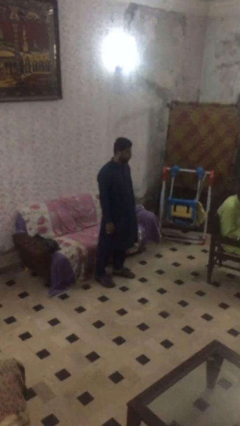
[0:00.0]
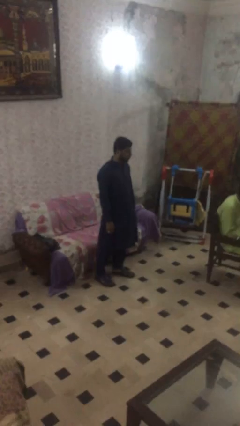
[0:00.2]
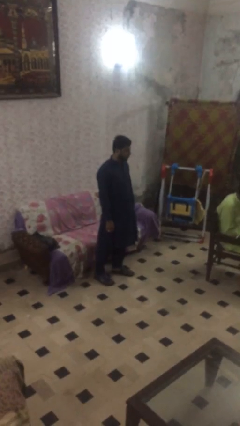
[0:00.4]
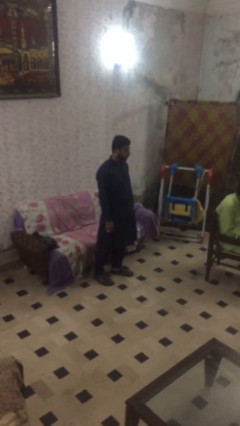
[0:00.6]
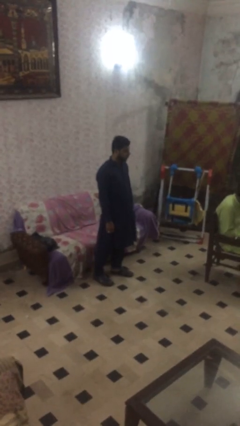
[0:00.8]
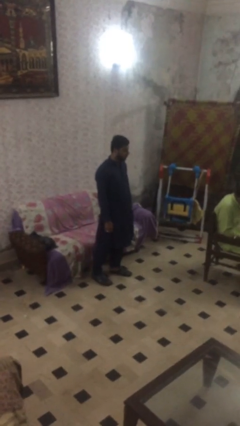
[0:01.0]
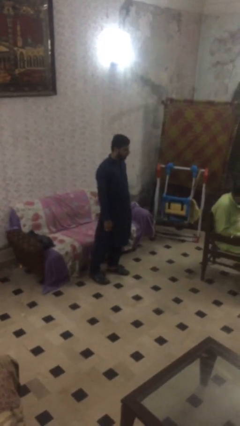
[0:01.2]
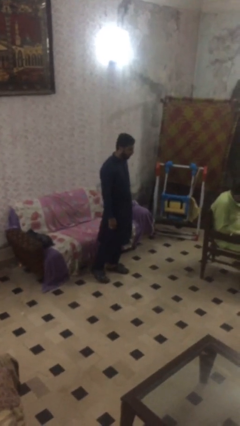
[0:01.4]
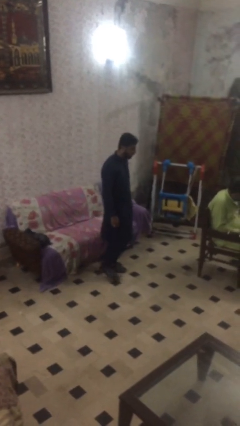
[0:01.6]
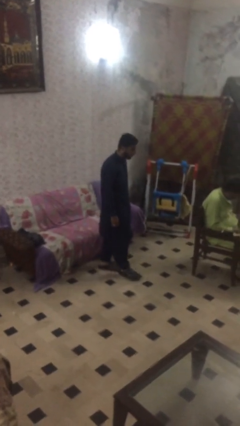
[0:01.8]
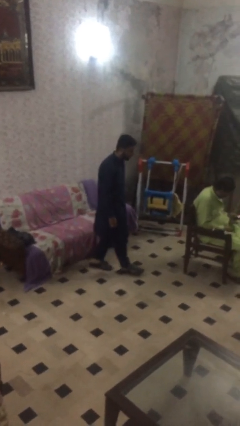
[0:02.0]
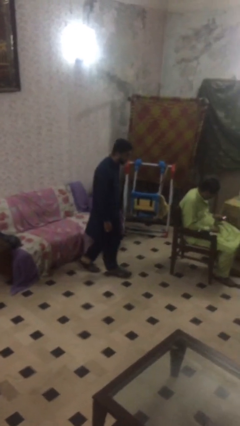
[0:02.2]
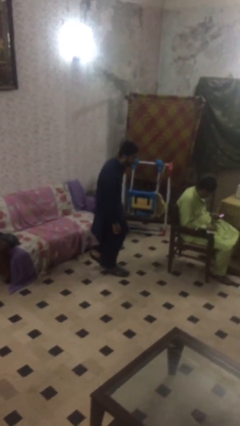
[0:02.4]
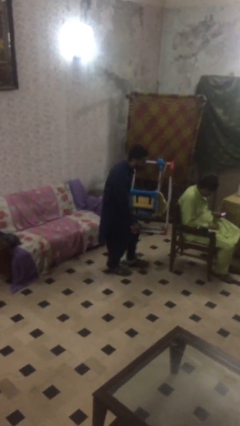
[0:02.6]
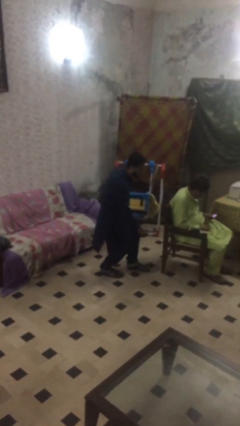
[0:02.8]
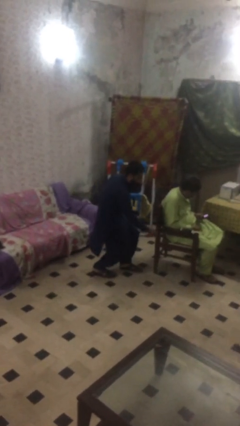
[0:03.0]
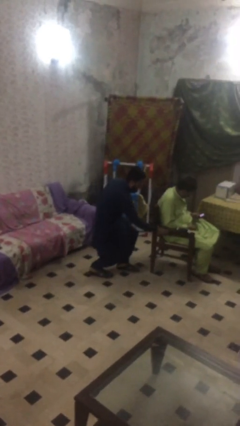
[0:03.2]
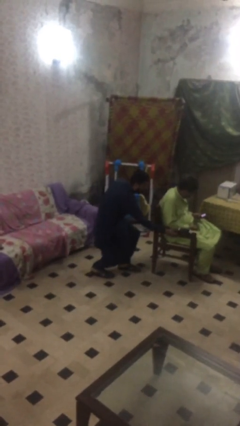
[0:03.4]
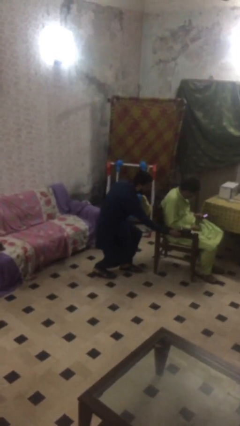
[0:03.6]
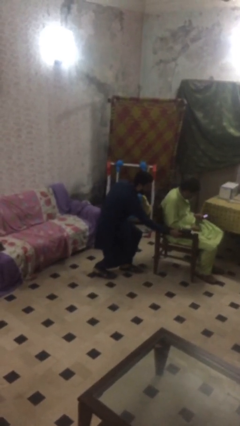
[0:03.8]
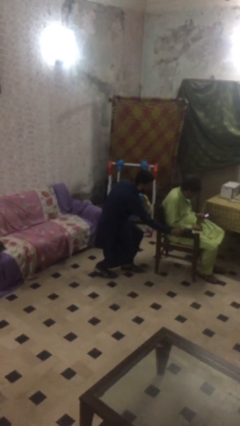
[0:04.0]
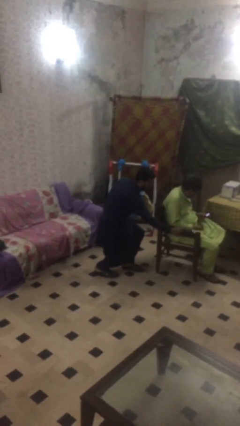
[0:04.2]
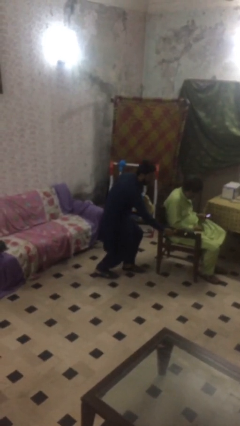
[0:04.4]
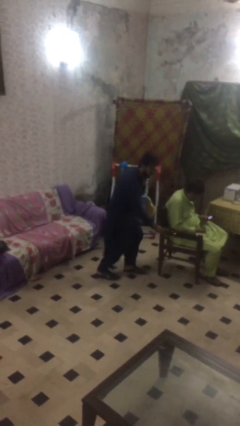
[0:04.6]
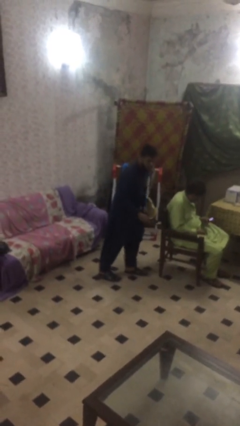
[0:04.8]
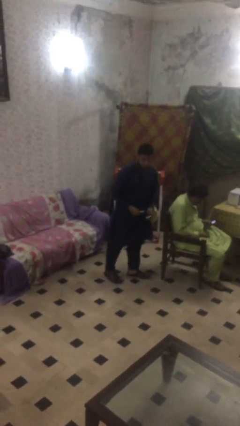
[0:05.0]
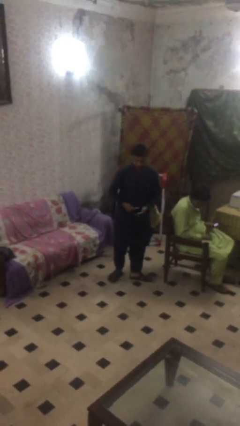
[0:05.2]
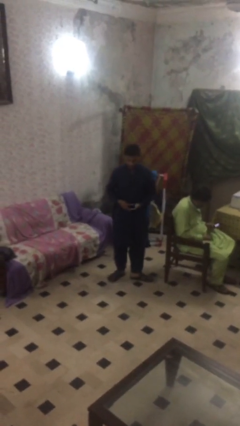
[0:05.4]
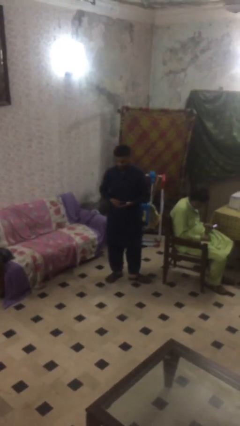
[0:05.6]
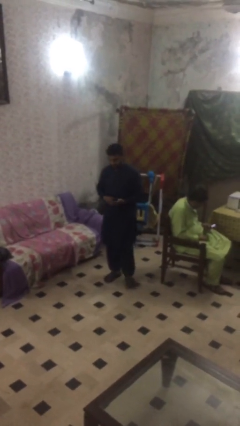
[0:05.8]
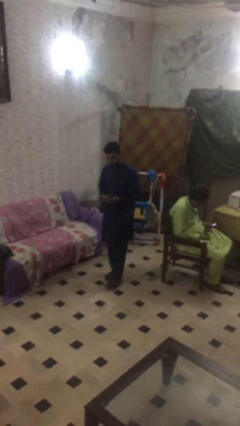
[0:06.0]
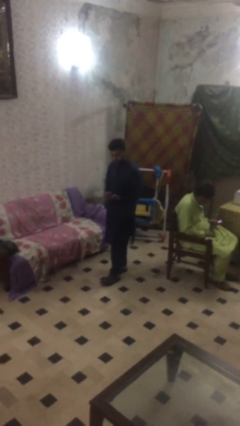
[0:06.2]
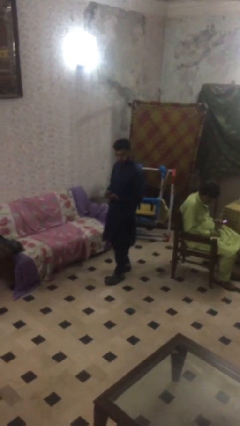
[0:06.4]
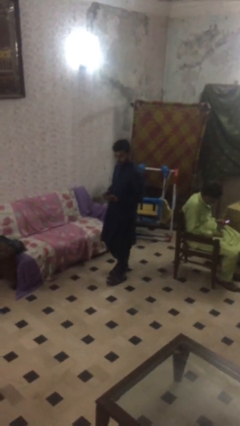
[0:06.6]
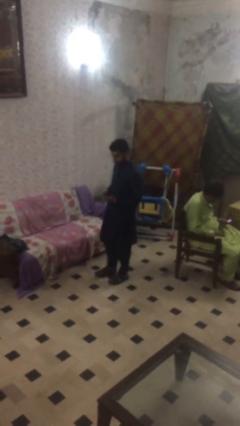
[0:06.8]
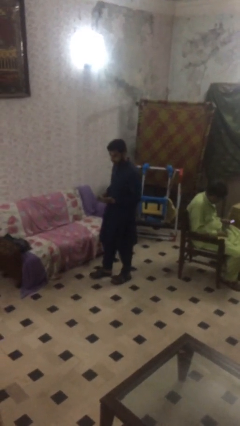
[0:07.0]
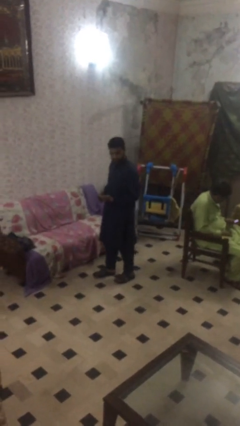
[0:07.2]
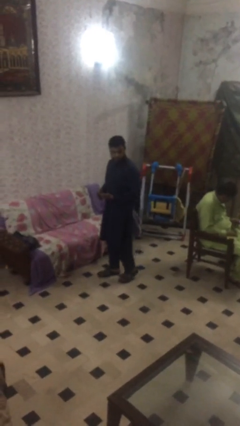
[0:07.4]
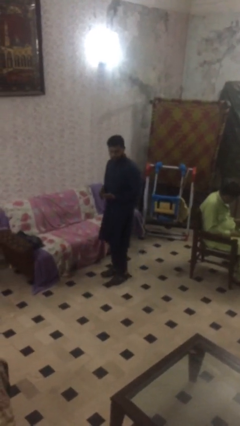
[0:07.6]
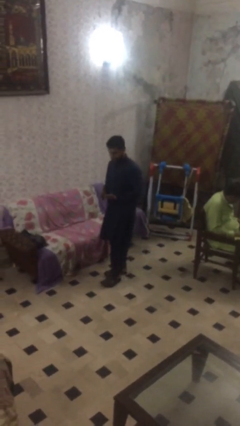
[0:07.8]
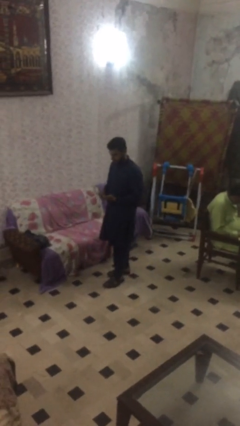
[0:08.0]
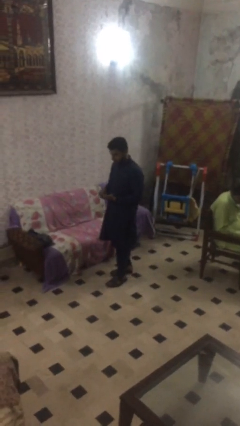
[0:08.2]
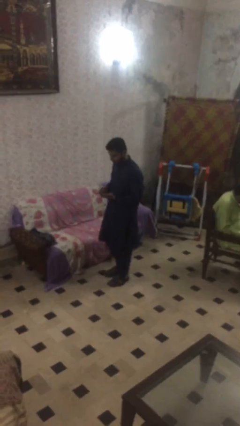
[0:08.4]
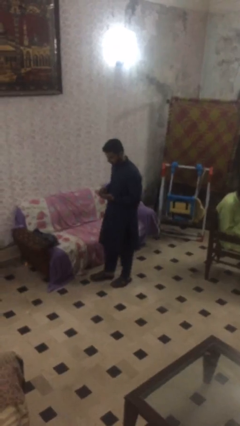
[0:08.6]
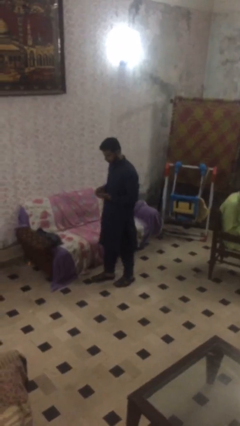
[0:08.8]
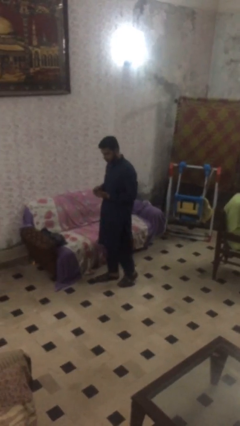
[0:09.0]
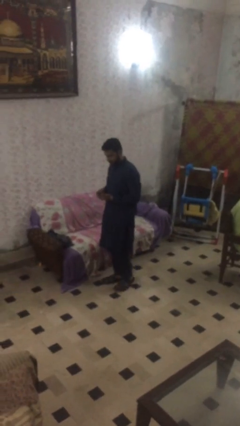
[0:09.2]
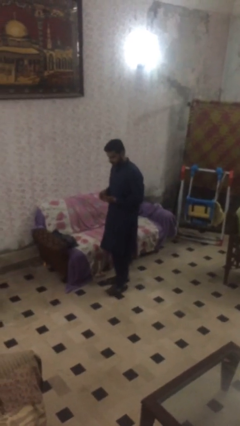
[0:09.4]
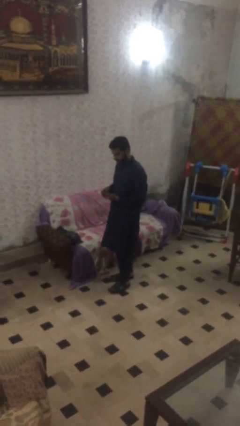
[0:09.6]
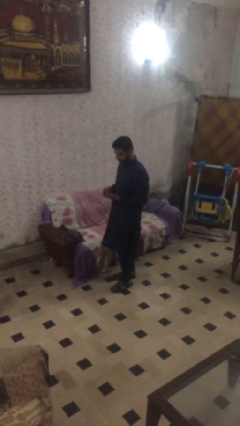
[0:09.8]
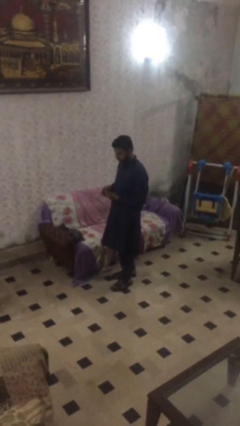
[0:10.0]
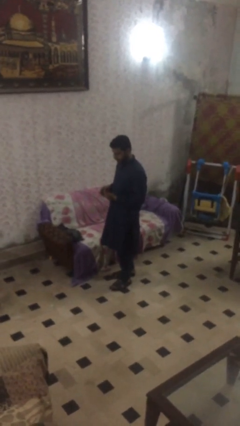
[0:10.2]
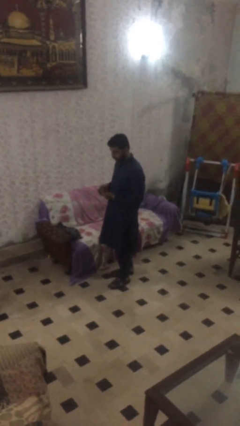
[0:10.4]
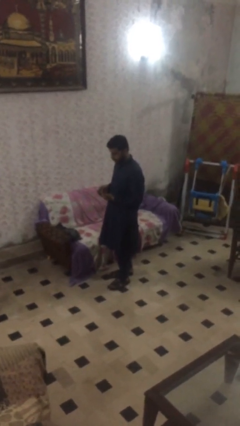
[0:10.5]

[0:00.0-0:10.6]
person steals object from person

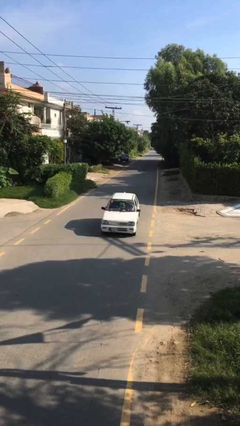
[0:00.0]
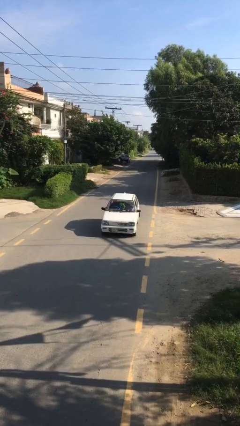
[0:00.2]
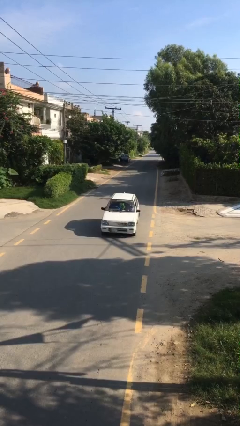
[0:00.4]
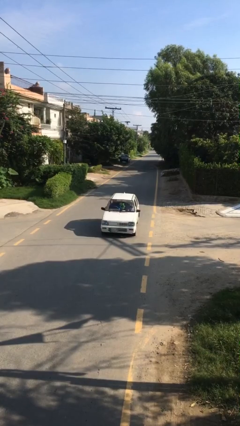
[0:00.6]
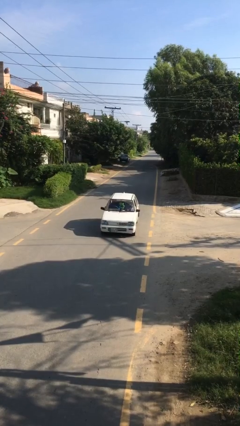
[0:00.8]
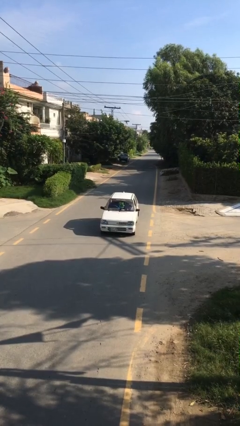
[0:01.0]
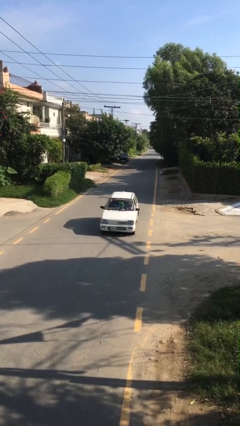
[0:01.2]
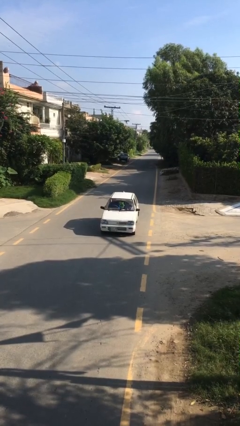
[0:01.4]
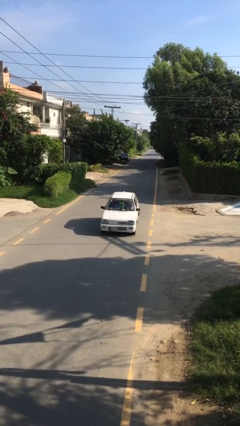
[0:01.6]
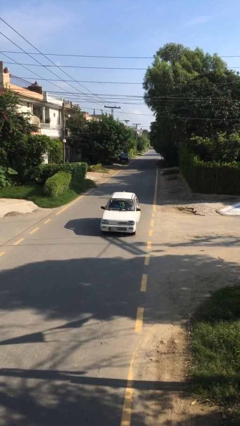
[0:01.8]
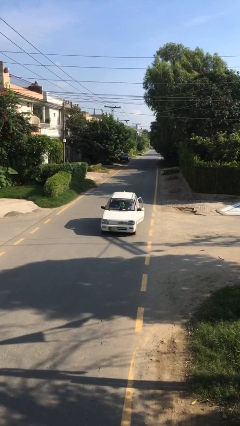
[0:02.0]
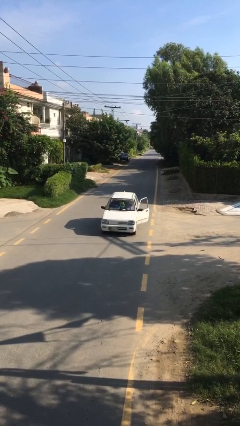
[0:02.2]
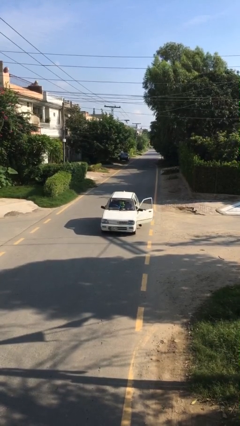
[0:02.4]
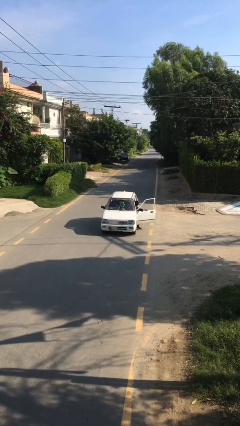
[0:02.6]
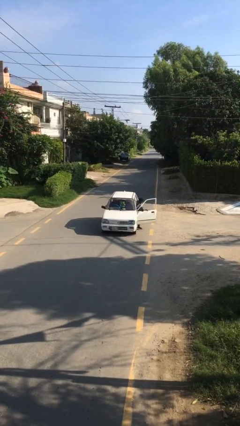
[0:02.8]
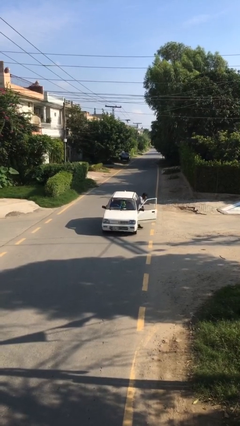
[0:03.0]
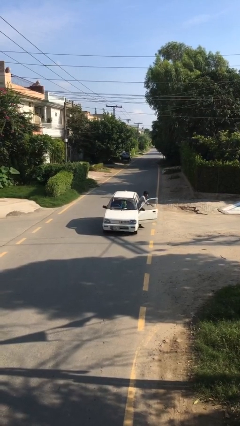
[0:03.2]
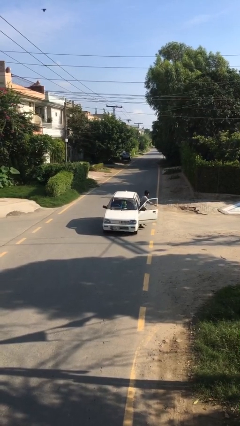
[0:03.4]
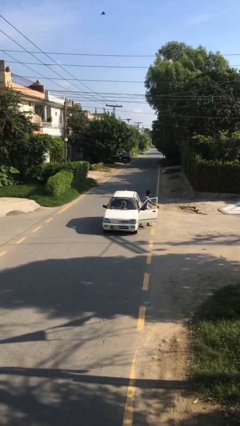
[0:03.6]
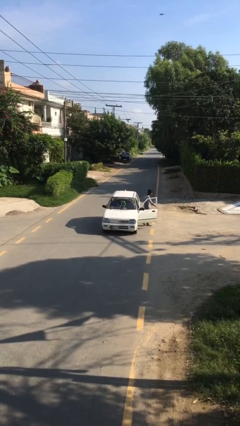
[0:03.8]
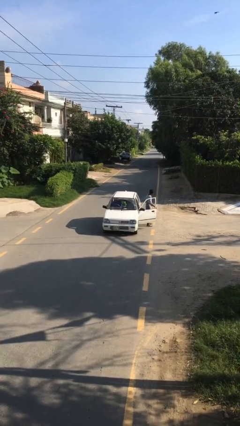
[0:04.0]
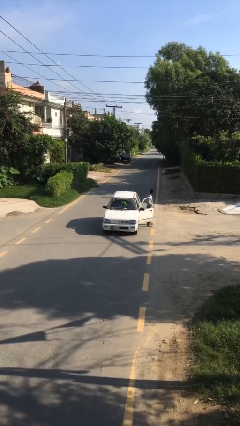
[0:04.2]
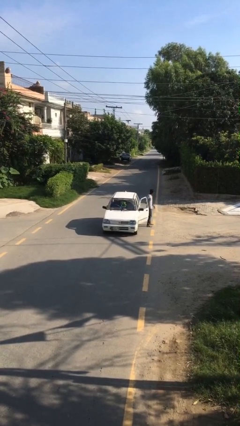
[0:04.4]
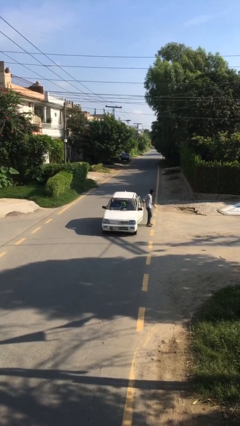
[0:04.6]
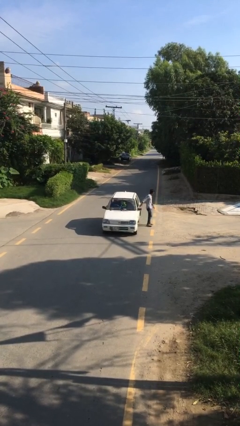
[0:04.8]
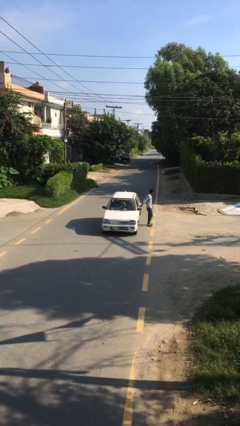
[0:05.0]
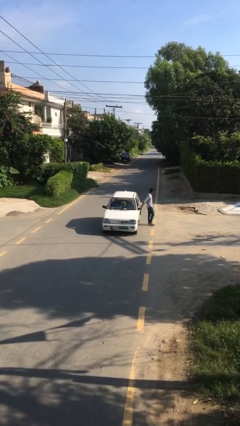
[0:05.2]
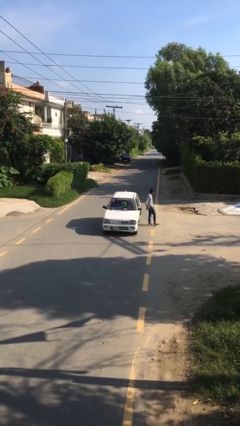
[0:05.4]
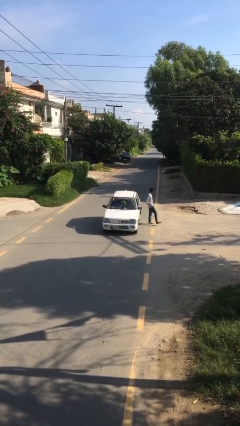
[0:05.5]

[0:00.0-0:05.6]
car drops off person

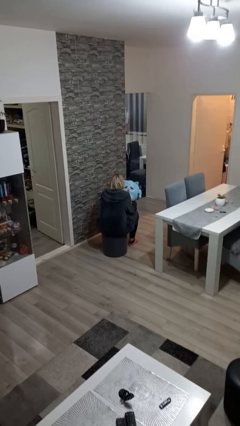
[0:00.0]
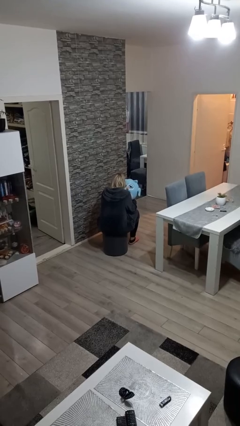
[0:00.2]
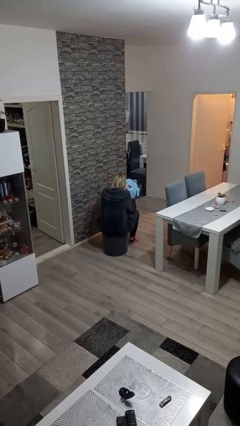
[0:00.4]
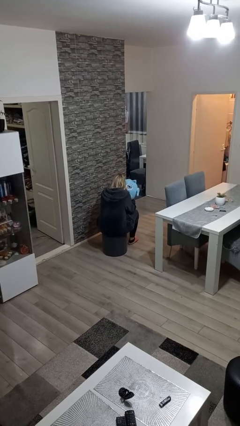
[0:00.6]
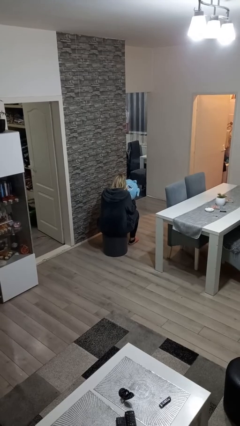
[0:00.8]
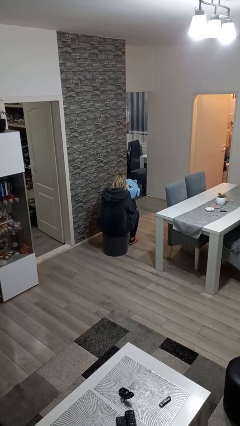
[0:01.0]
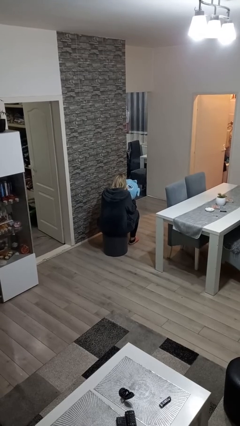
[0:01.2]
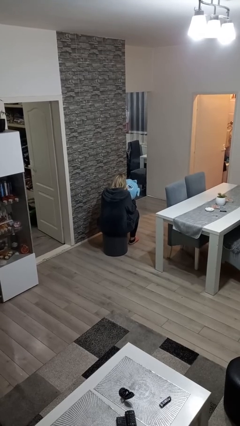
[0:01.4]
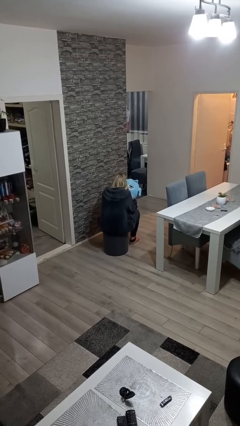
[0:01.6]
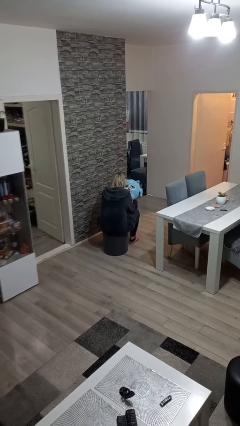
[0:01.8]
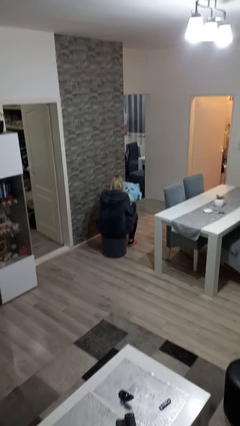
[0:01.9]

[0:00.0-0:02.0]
person hugs stuffed animal

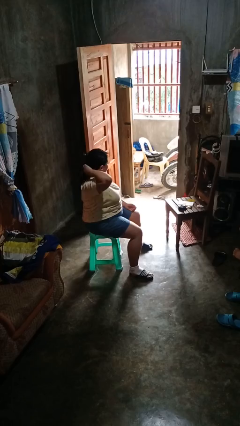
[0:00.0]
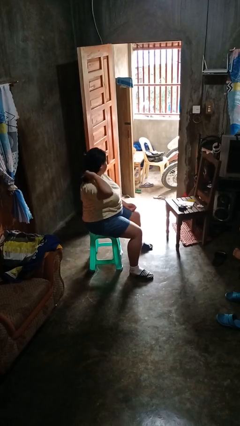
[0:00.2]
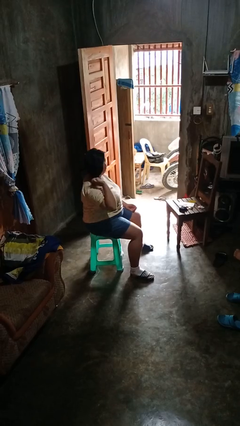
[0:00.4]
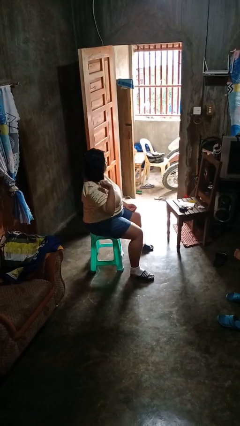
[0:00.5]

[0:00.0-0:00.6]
person takes off hairtie
